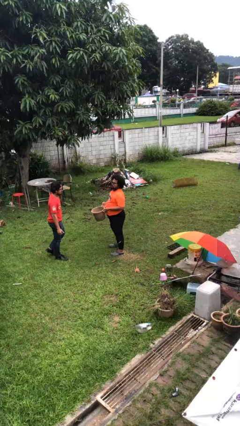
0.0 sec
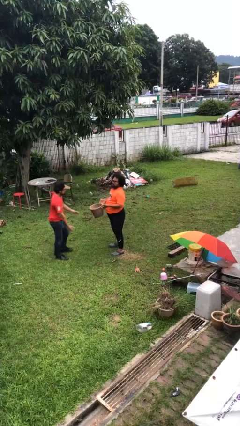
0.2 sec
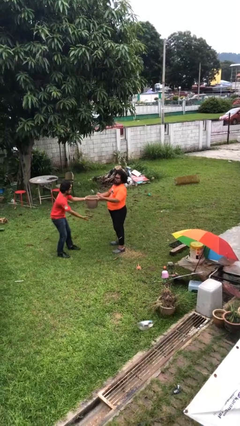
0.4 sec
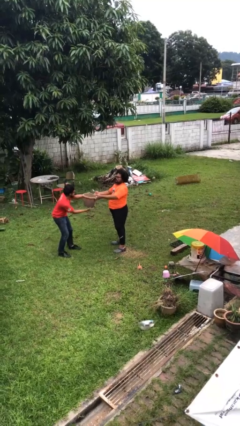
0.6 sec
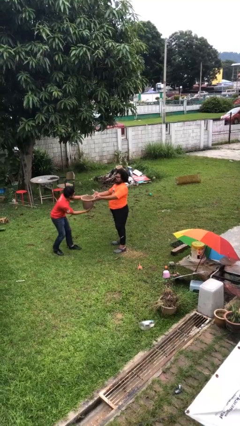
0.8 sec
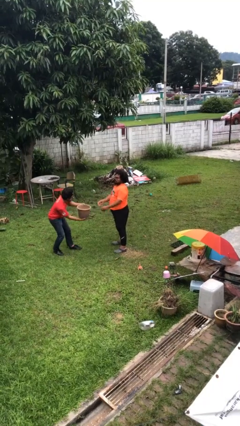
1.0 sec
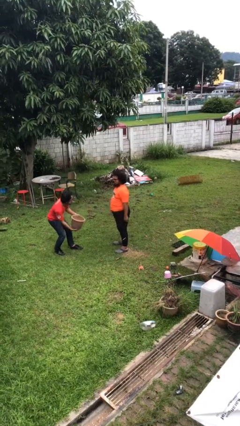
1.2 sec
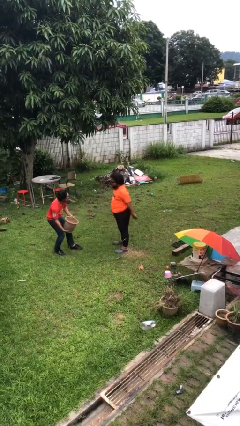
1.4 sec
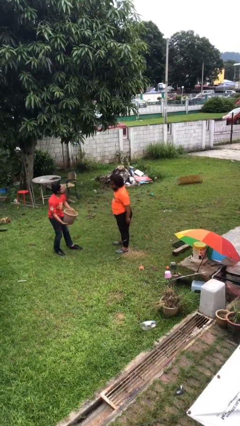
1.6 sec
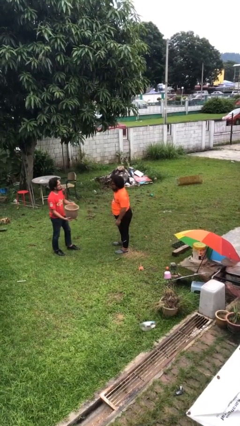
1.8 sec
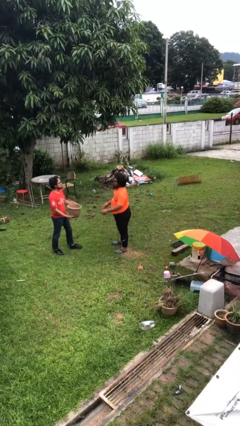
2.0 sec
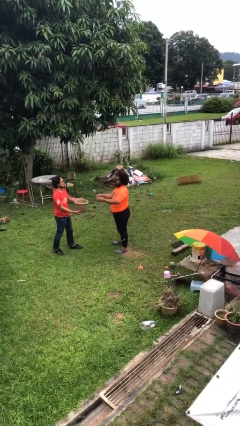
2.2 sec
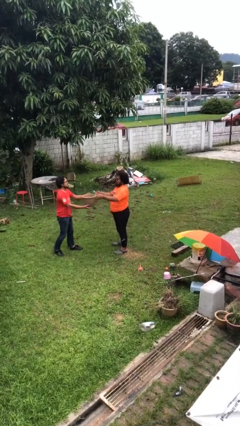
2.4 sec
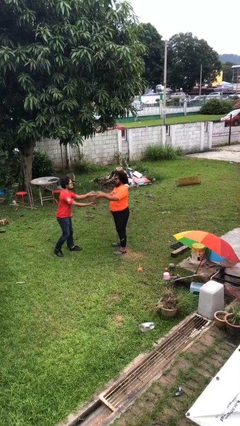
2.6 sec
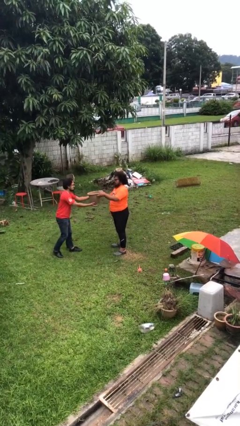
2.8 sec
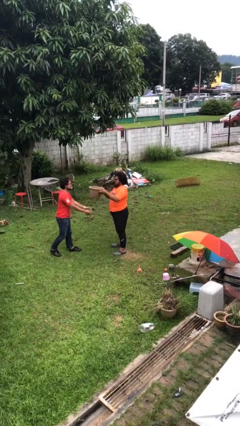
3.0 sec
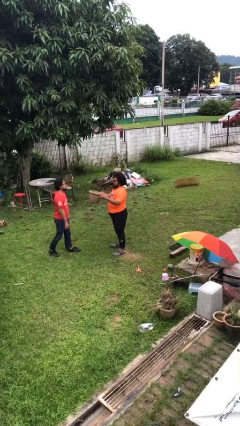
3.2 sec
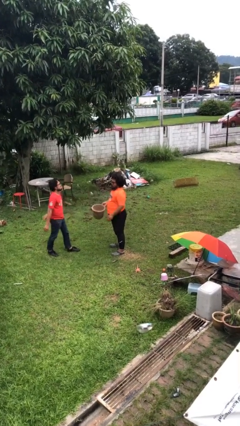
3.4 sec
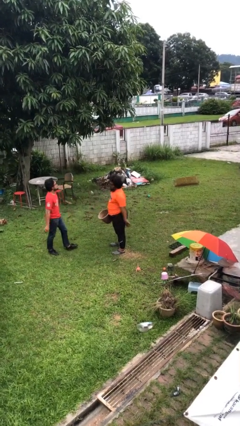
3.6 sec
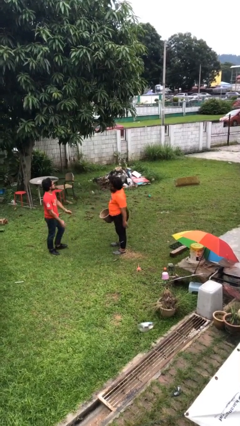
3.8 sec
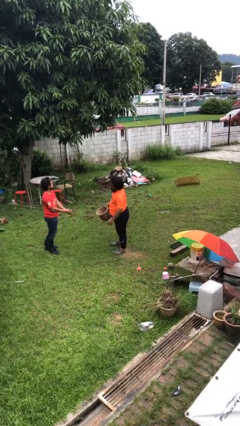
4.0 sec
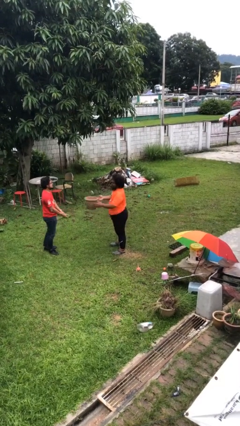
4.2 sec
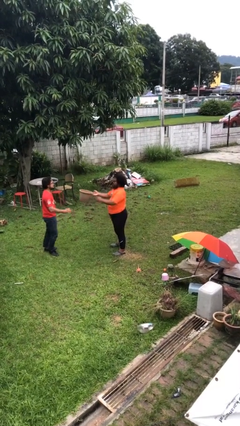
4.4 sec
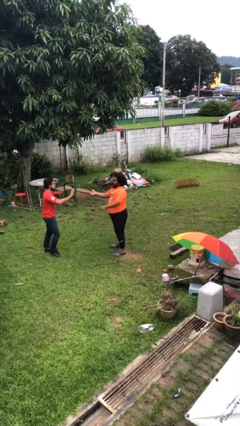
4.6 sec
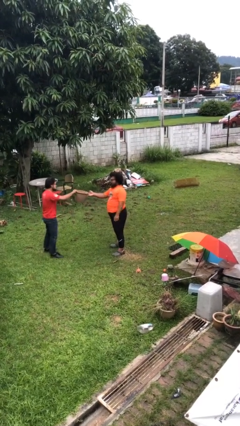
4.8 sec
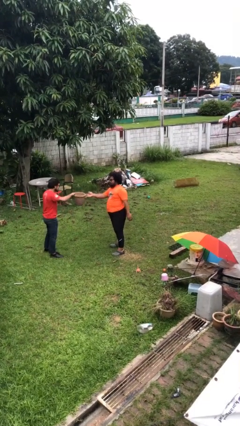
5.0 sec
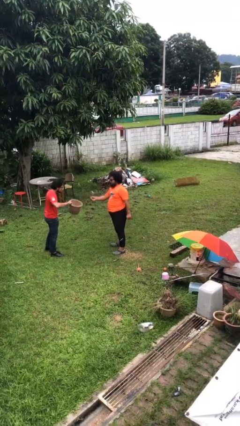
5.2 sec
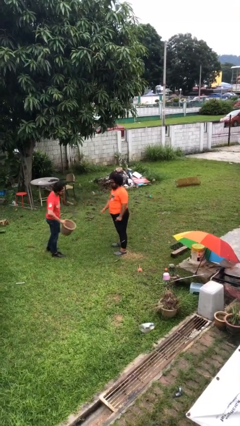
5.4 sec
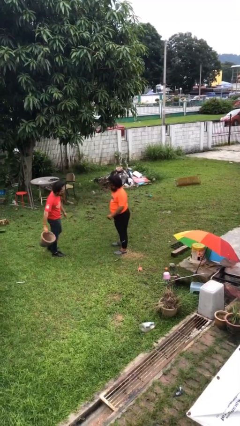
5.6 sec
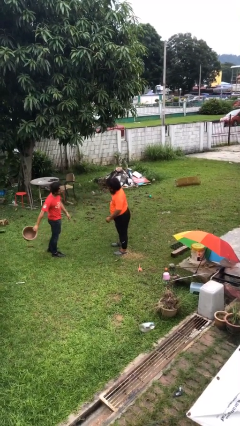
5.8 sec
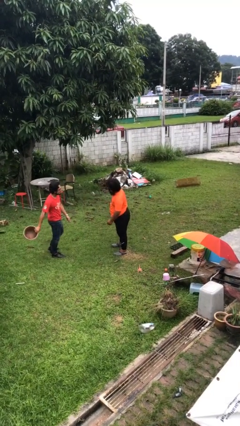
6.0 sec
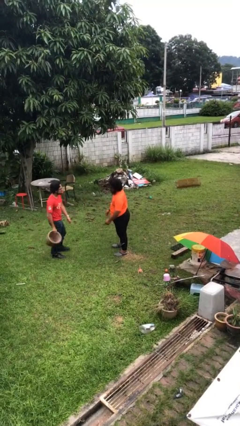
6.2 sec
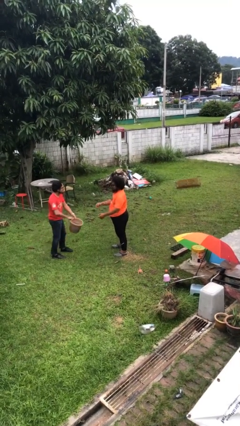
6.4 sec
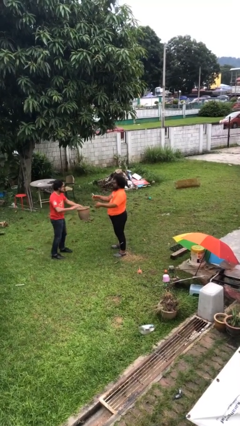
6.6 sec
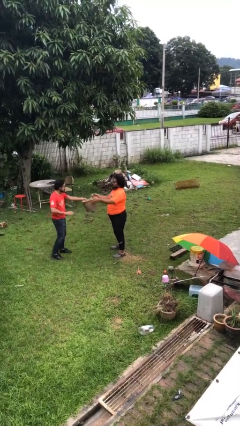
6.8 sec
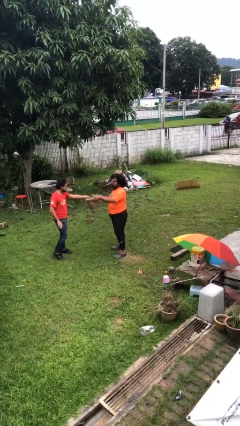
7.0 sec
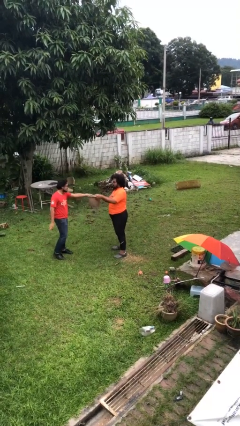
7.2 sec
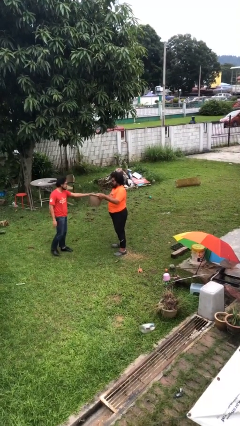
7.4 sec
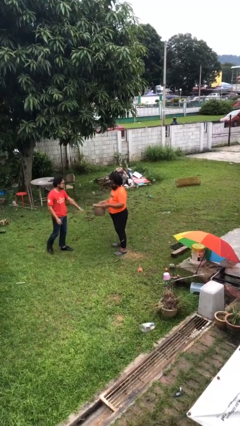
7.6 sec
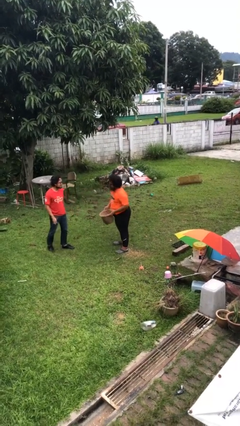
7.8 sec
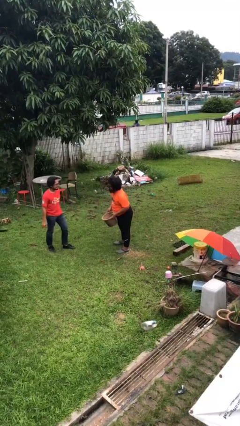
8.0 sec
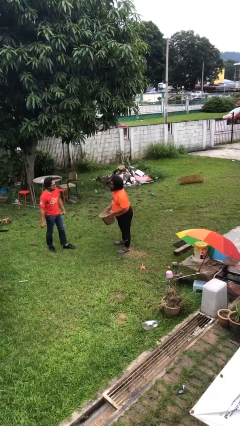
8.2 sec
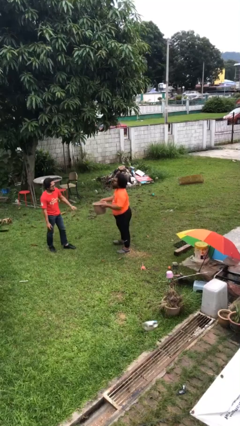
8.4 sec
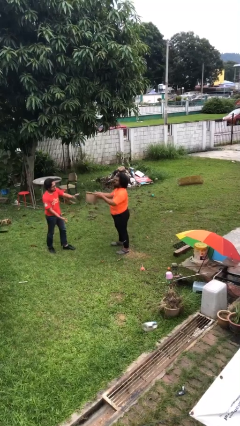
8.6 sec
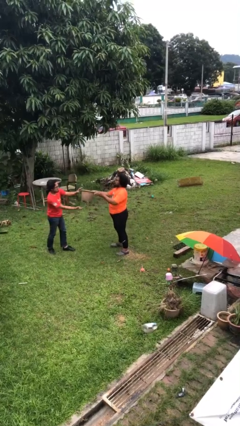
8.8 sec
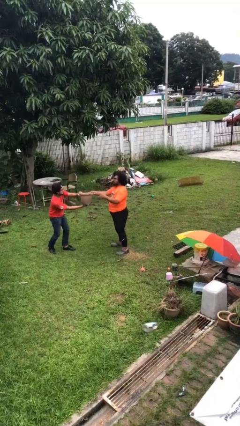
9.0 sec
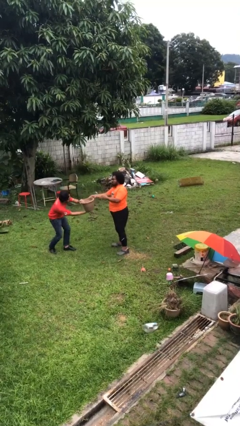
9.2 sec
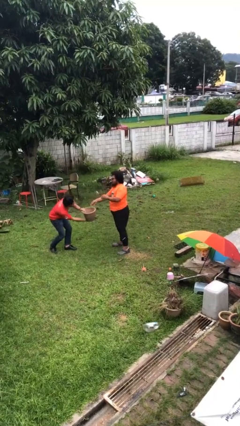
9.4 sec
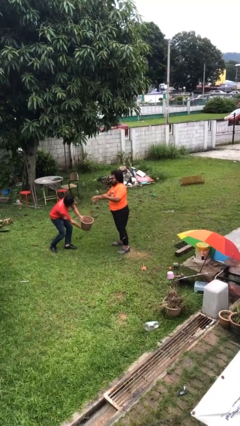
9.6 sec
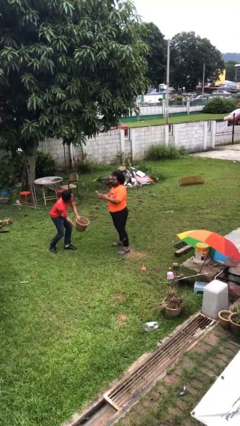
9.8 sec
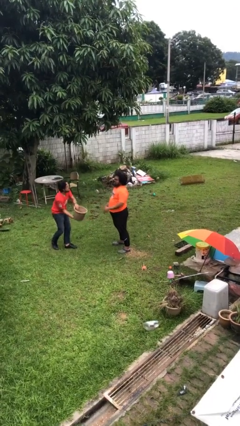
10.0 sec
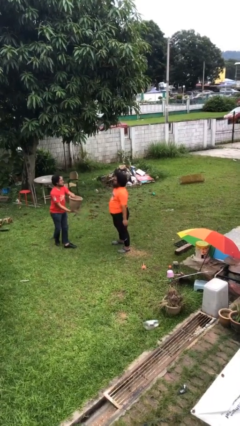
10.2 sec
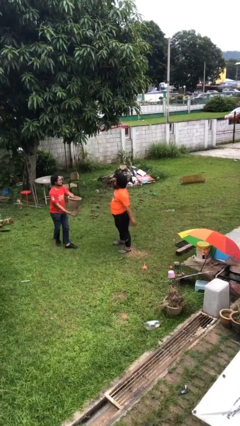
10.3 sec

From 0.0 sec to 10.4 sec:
person transfers object to person

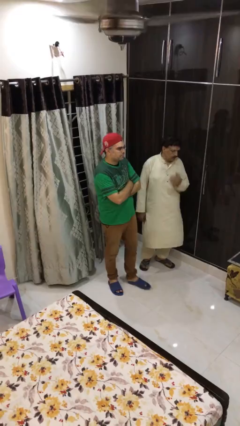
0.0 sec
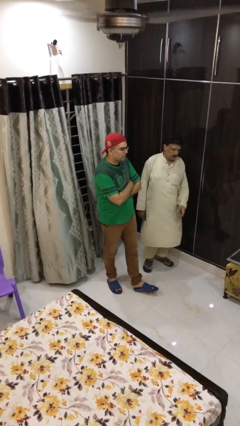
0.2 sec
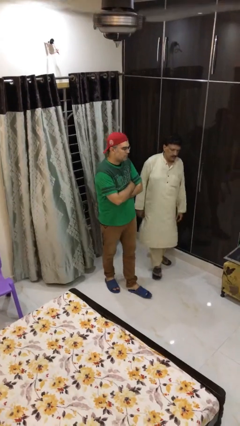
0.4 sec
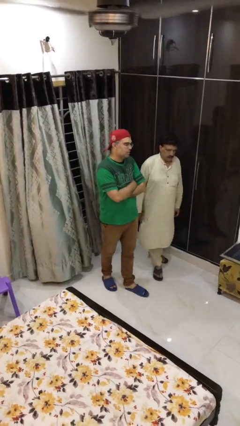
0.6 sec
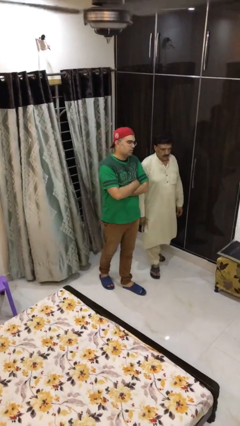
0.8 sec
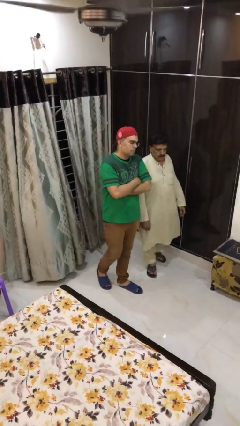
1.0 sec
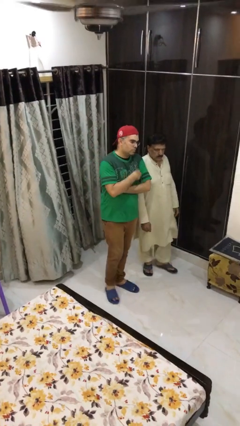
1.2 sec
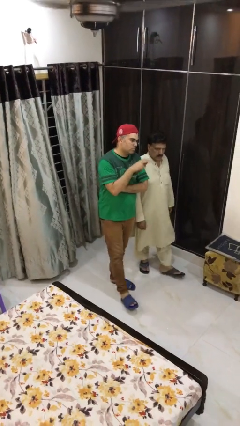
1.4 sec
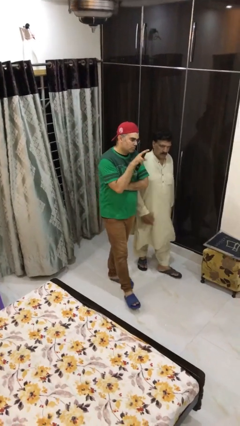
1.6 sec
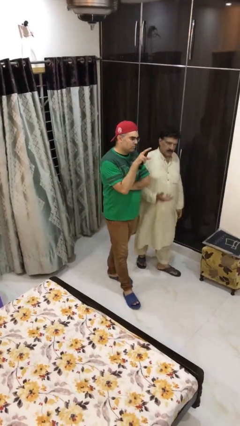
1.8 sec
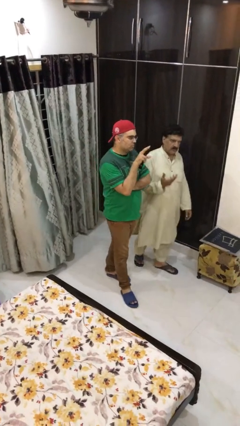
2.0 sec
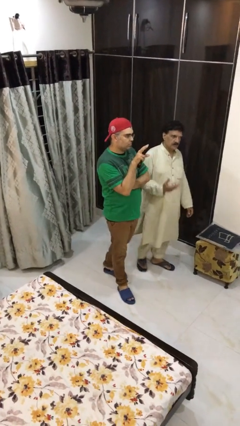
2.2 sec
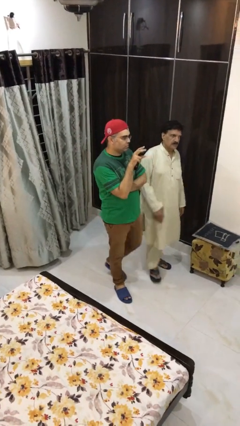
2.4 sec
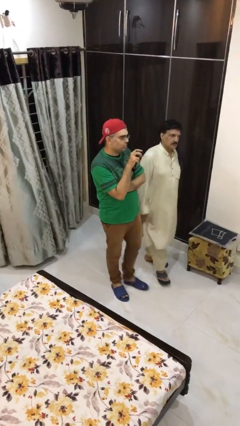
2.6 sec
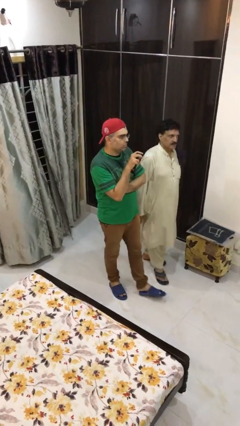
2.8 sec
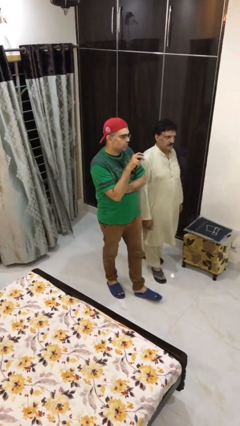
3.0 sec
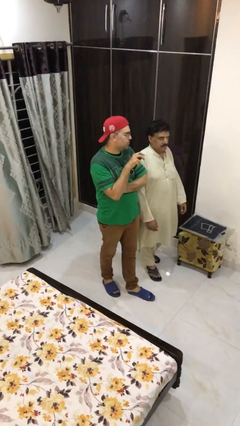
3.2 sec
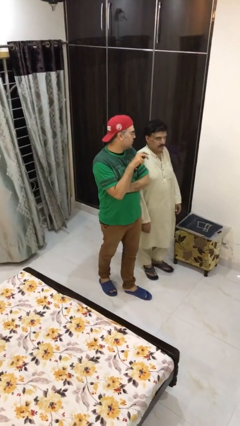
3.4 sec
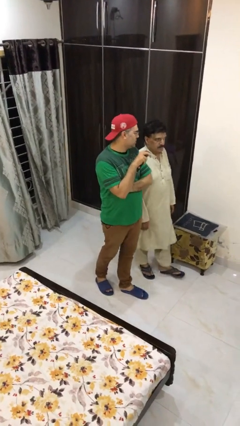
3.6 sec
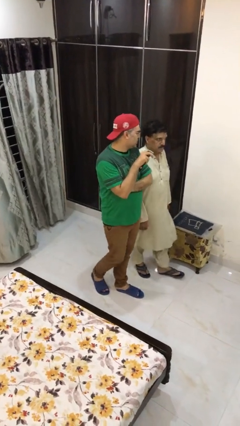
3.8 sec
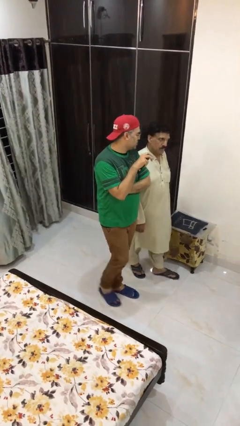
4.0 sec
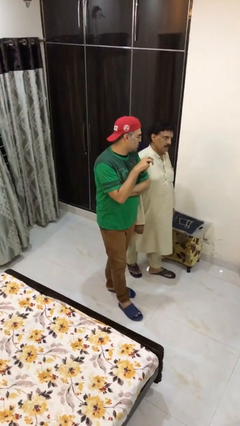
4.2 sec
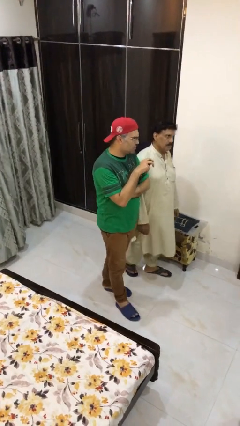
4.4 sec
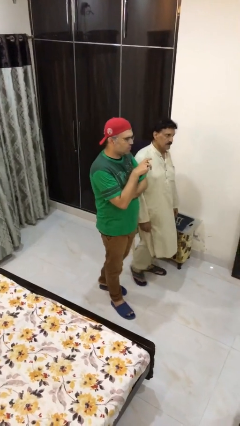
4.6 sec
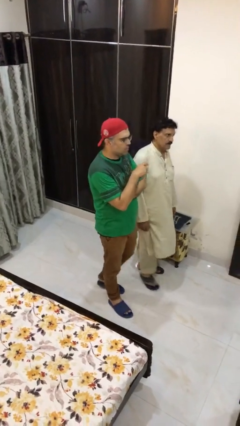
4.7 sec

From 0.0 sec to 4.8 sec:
person talks to person

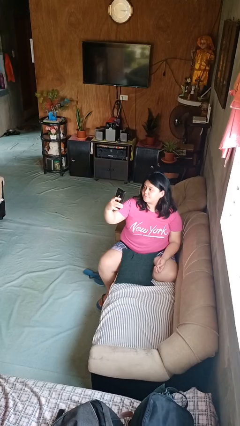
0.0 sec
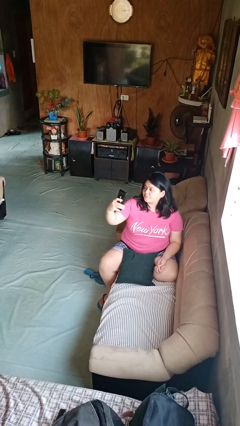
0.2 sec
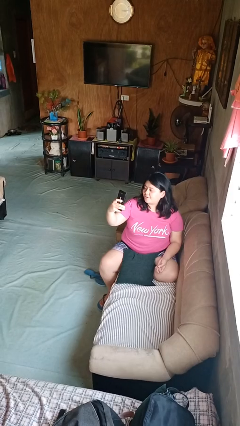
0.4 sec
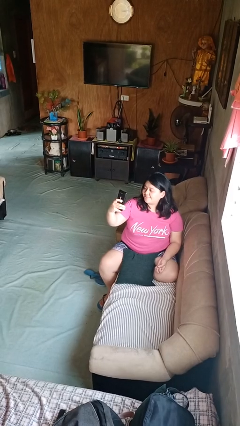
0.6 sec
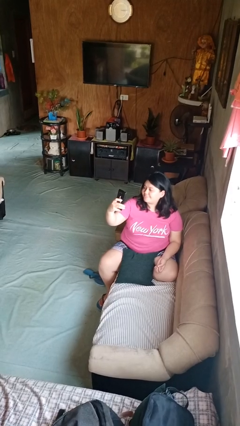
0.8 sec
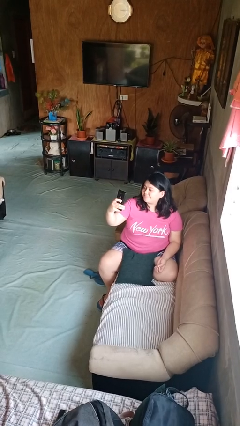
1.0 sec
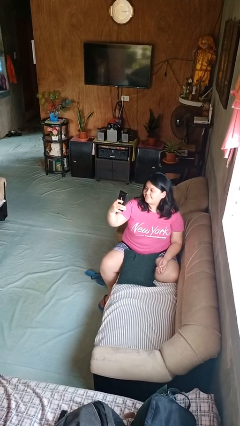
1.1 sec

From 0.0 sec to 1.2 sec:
person takes selfie

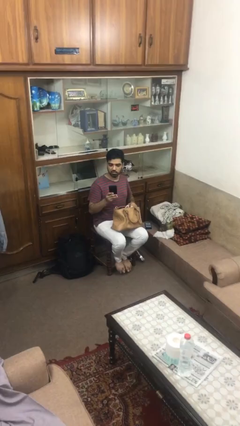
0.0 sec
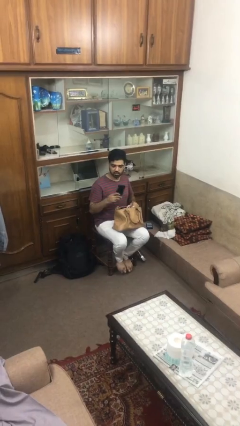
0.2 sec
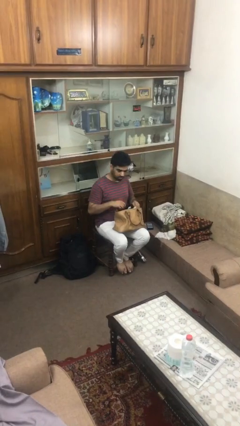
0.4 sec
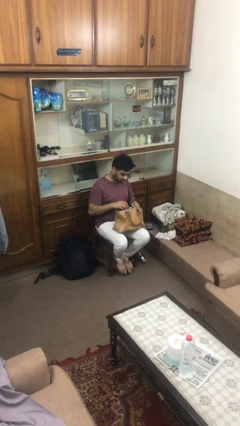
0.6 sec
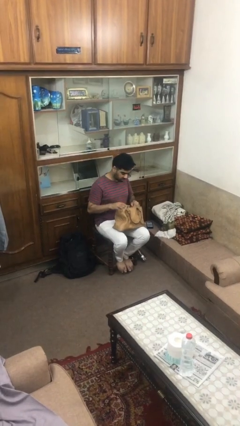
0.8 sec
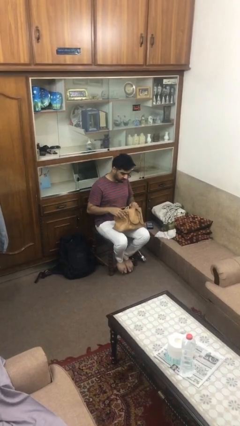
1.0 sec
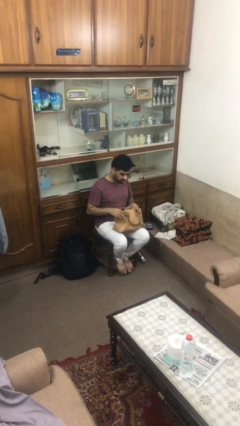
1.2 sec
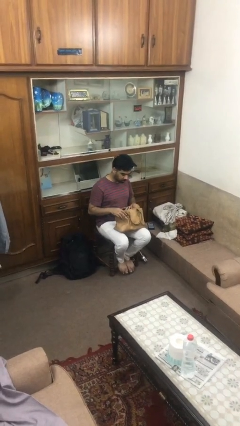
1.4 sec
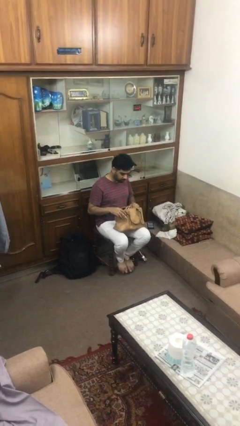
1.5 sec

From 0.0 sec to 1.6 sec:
person puts object into purse
